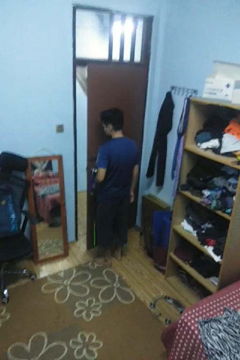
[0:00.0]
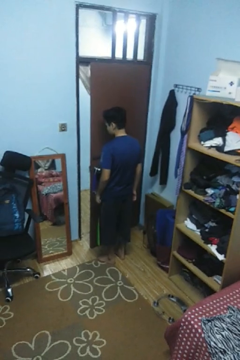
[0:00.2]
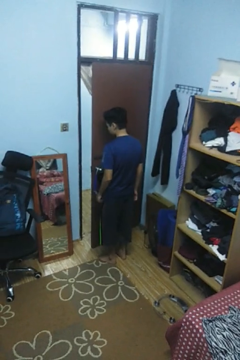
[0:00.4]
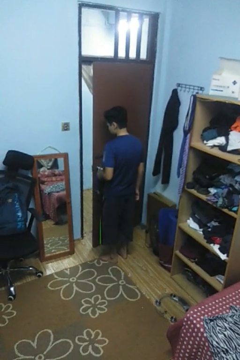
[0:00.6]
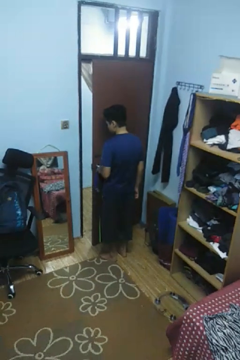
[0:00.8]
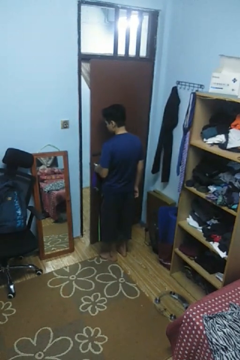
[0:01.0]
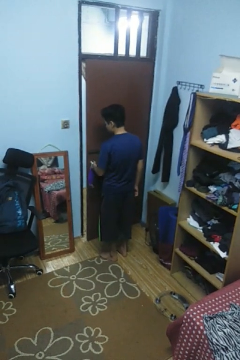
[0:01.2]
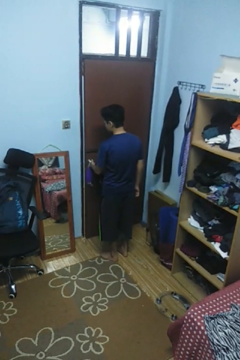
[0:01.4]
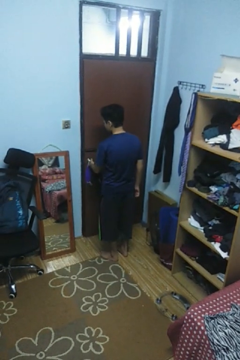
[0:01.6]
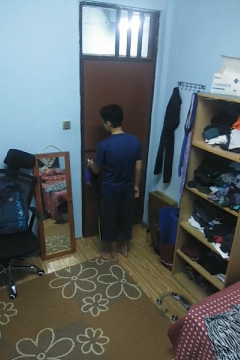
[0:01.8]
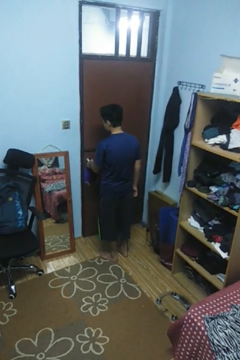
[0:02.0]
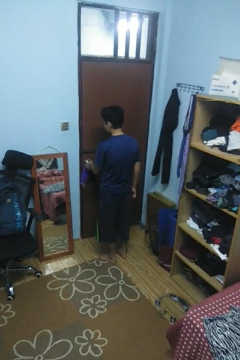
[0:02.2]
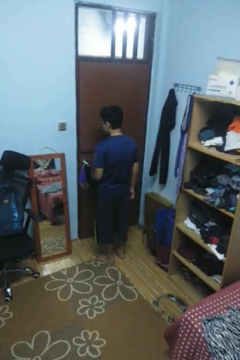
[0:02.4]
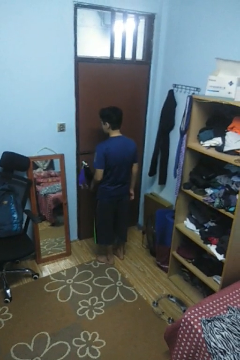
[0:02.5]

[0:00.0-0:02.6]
person closes facility door

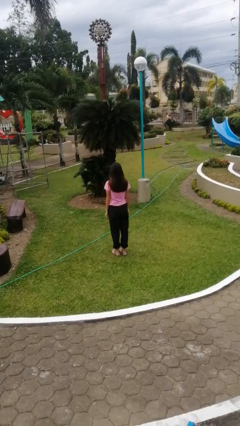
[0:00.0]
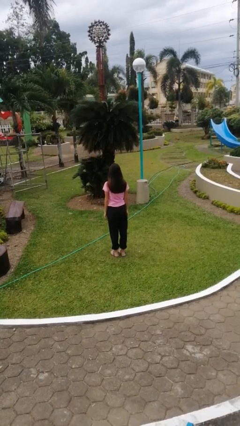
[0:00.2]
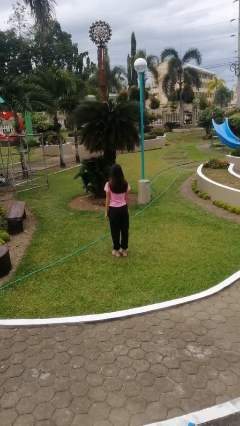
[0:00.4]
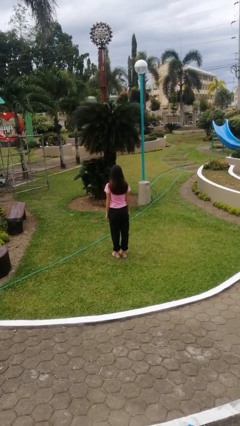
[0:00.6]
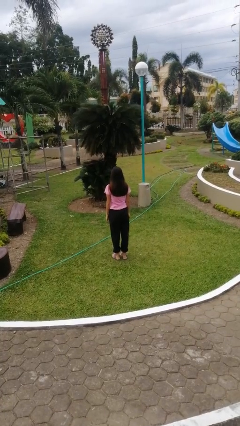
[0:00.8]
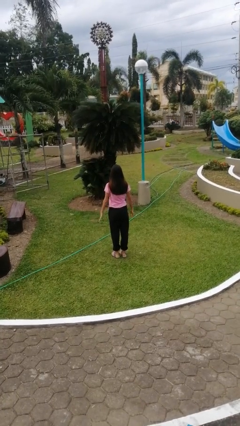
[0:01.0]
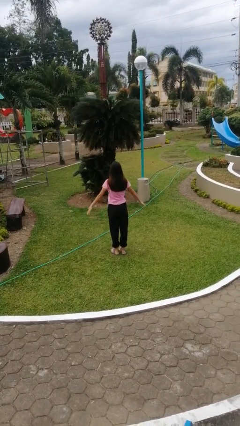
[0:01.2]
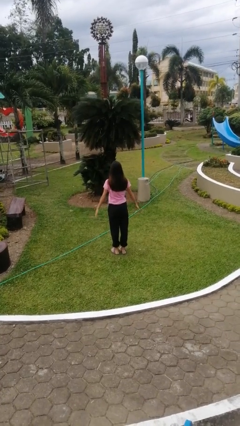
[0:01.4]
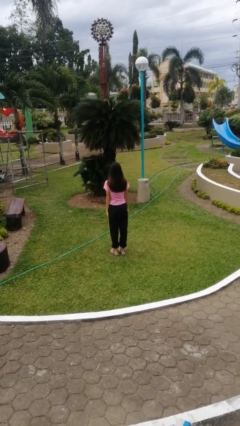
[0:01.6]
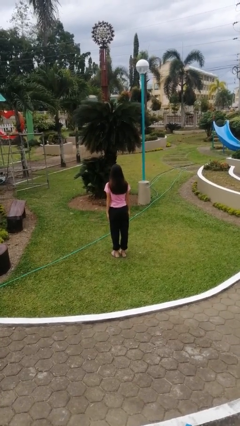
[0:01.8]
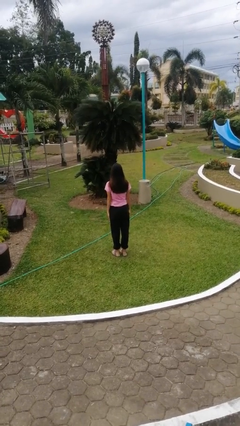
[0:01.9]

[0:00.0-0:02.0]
person slaps hands on thighs

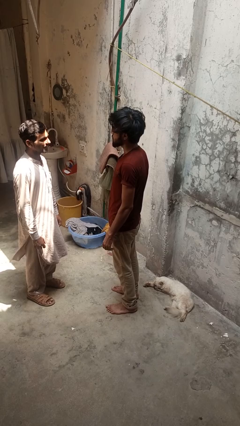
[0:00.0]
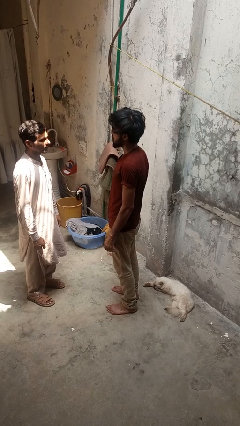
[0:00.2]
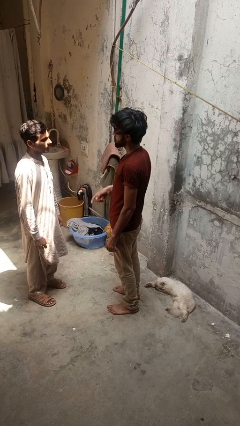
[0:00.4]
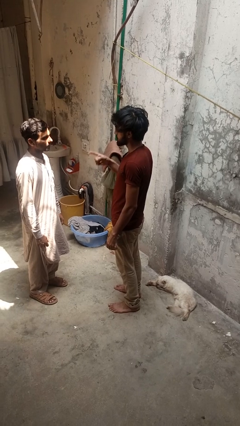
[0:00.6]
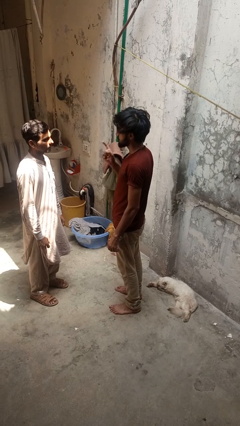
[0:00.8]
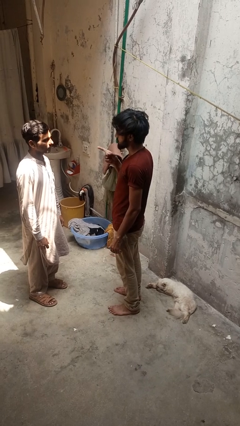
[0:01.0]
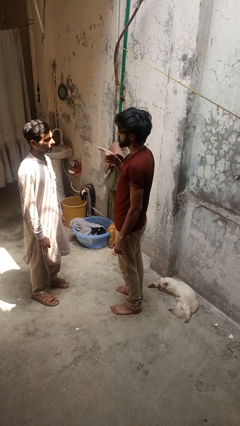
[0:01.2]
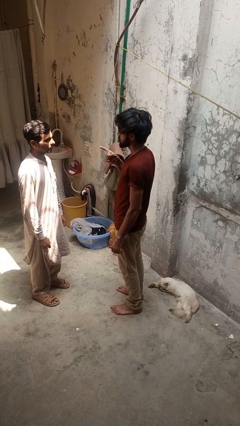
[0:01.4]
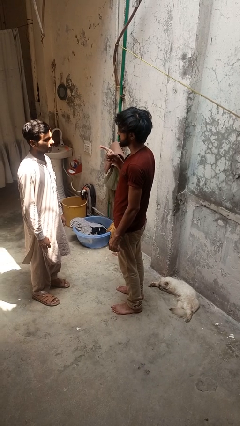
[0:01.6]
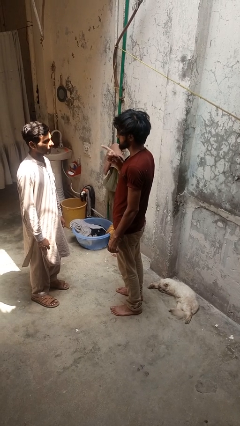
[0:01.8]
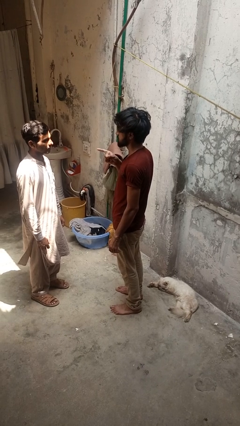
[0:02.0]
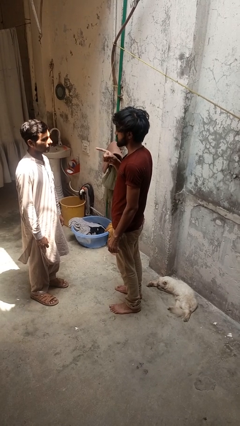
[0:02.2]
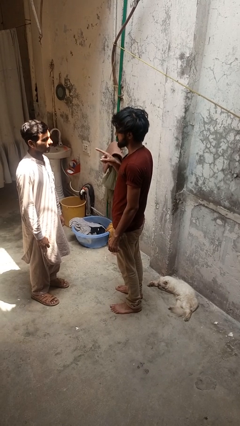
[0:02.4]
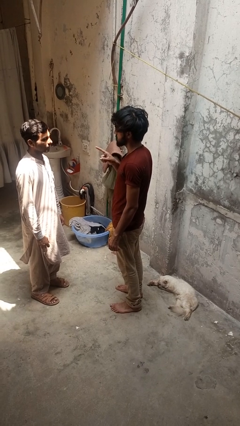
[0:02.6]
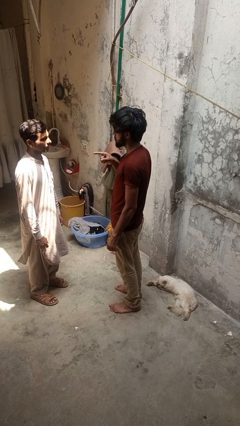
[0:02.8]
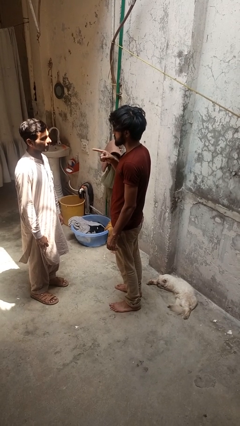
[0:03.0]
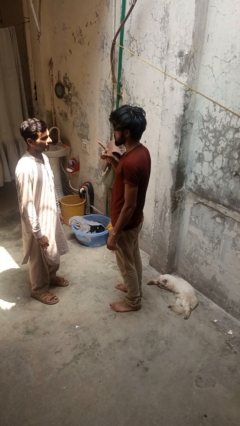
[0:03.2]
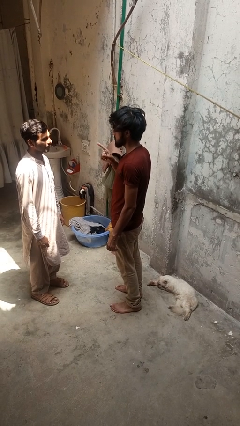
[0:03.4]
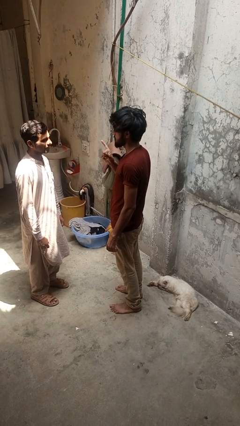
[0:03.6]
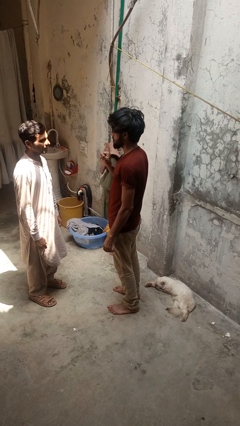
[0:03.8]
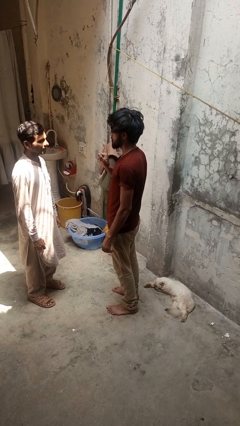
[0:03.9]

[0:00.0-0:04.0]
person points at person

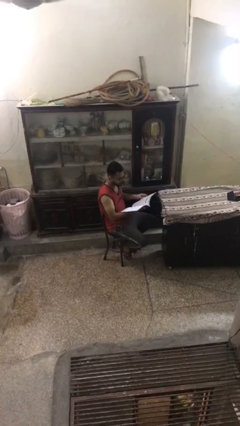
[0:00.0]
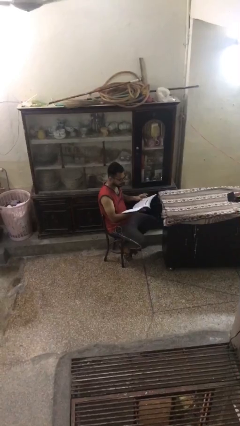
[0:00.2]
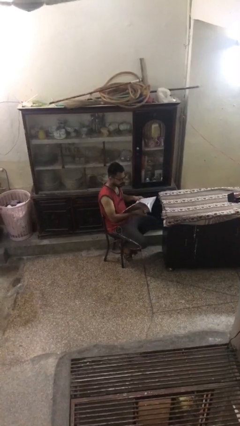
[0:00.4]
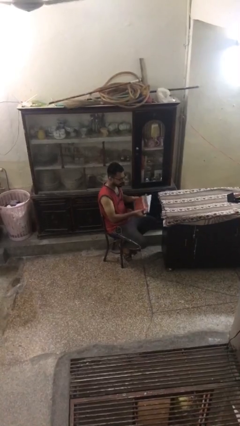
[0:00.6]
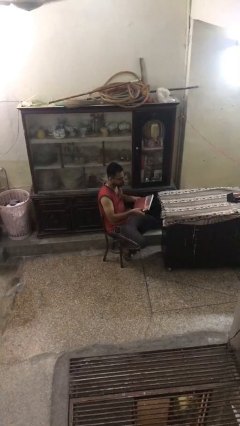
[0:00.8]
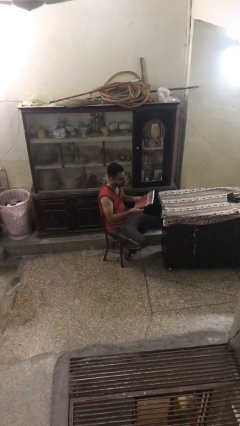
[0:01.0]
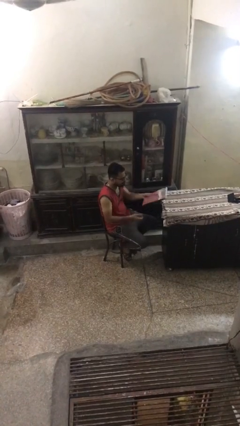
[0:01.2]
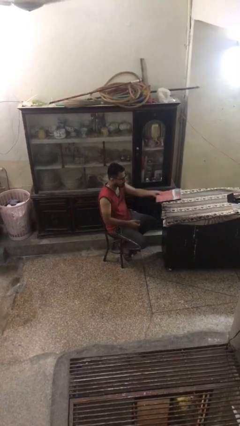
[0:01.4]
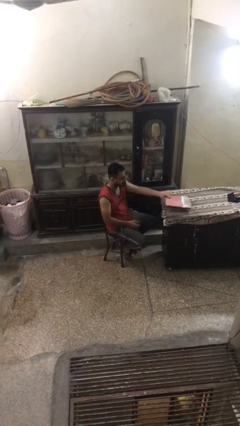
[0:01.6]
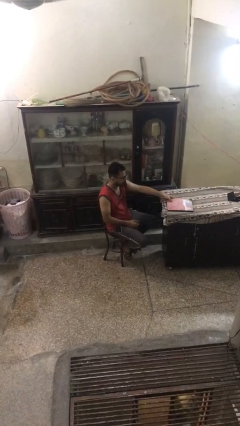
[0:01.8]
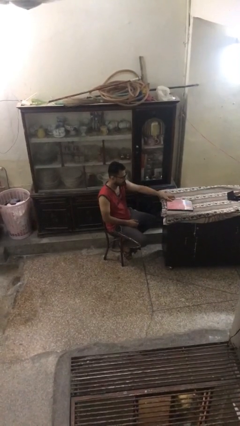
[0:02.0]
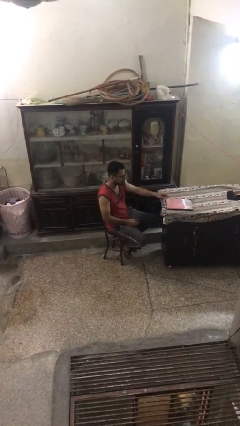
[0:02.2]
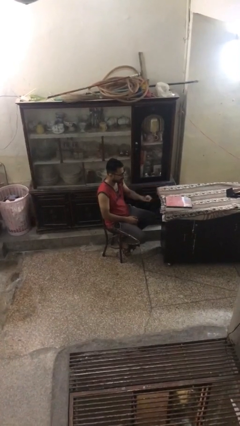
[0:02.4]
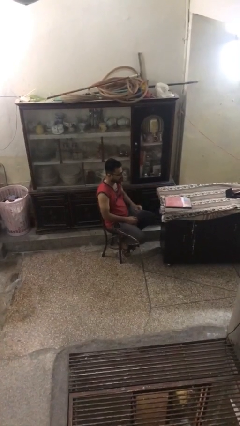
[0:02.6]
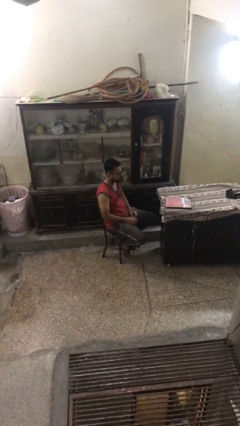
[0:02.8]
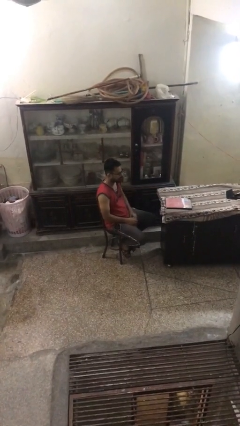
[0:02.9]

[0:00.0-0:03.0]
person puts down object on table

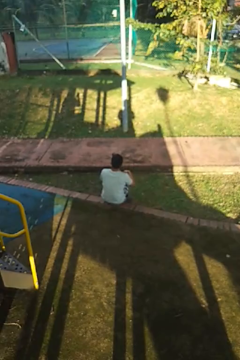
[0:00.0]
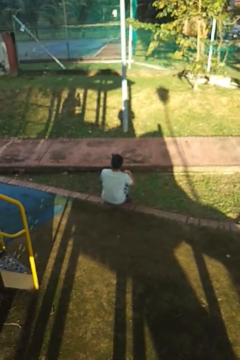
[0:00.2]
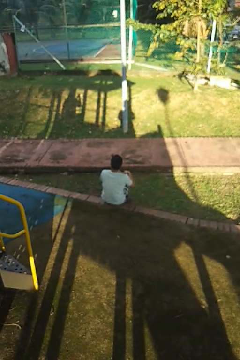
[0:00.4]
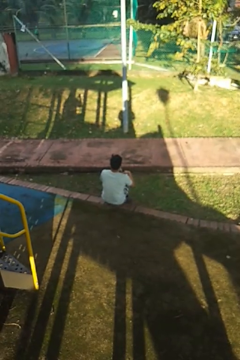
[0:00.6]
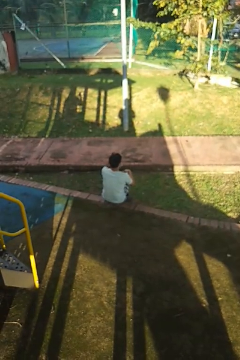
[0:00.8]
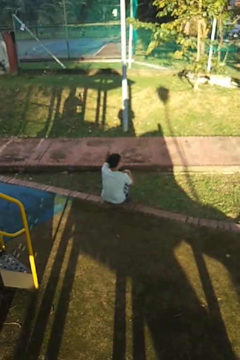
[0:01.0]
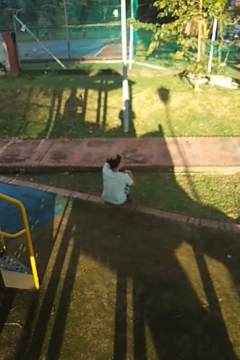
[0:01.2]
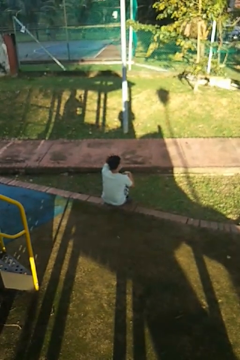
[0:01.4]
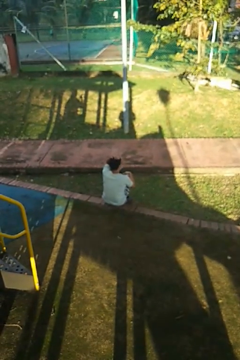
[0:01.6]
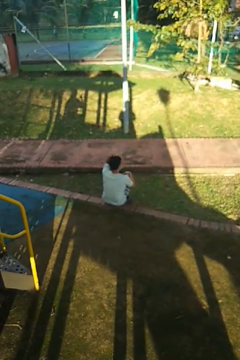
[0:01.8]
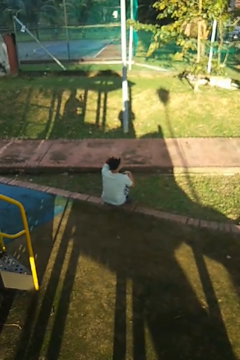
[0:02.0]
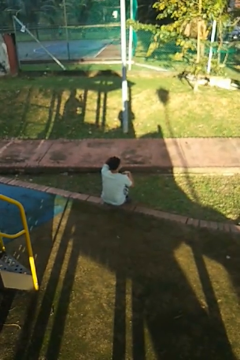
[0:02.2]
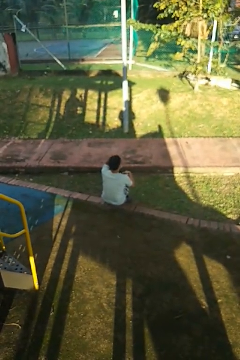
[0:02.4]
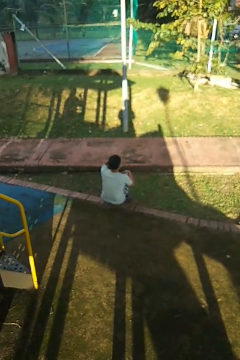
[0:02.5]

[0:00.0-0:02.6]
person pats head

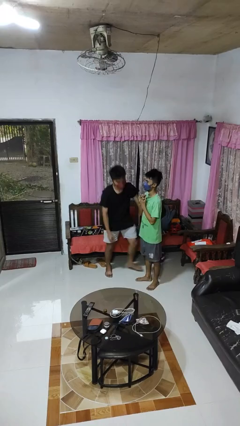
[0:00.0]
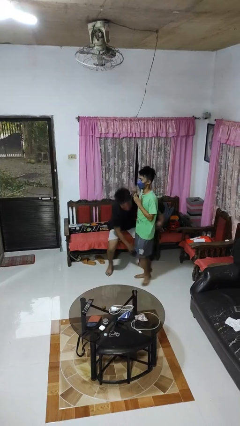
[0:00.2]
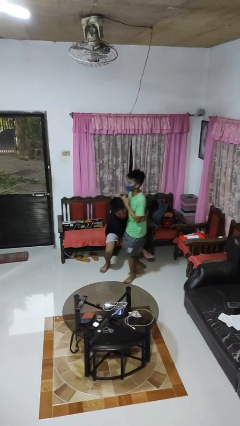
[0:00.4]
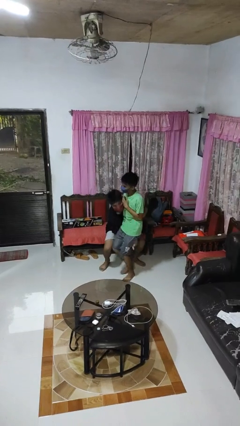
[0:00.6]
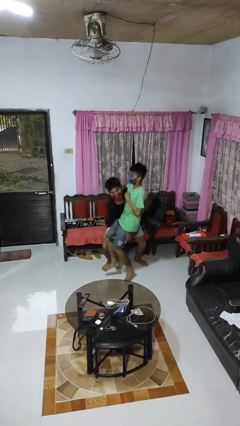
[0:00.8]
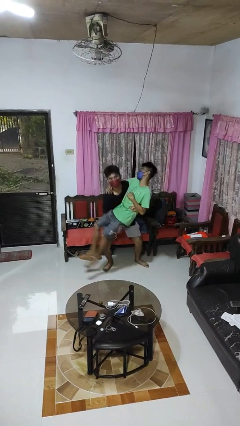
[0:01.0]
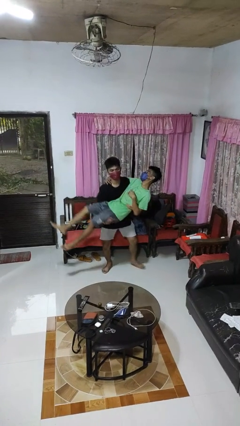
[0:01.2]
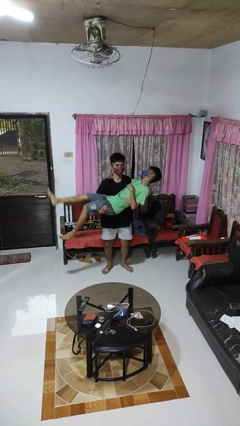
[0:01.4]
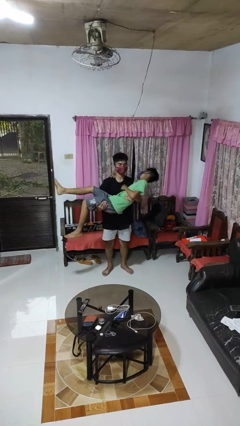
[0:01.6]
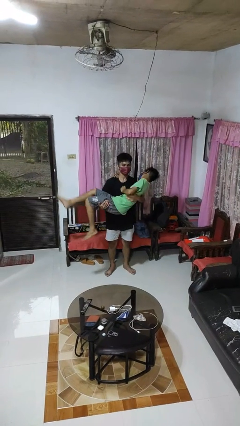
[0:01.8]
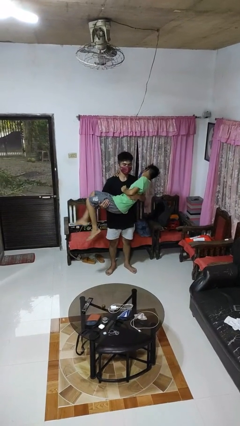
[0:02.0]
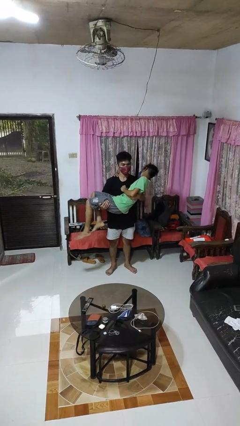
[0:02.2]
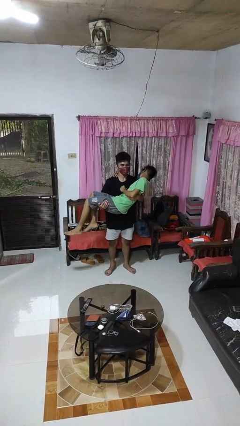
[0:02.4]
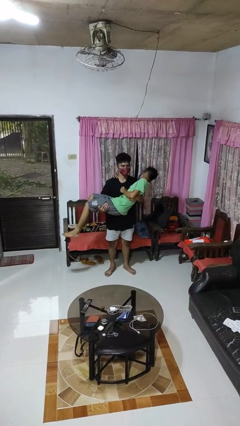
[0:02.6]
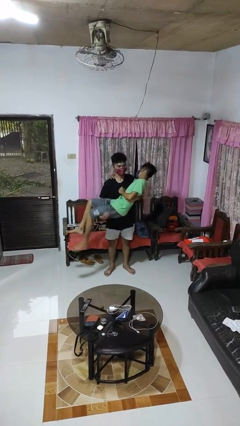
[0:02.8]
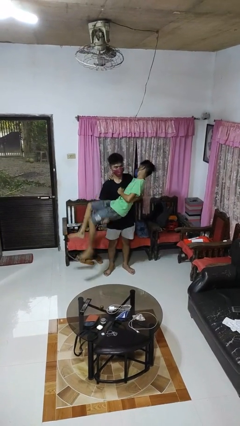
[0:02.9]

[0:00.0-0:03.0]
person picks up person

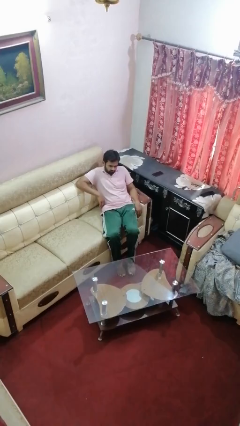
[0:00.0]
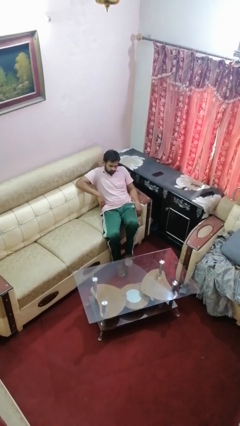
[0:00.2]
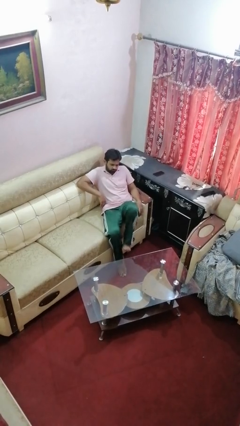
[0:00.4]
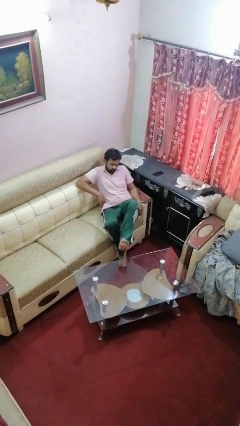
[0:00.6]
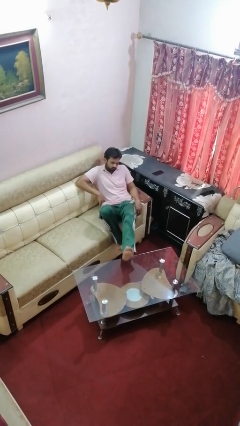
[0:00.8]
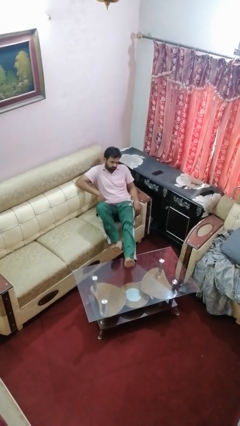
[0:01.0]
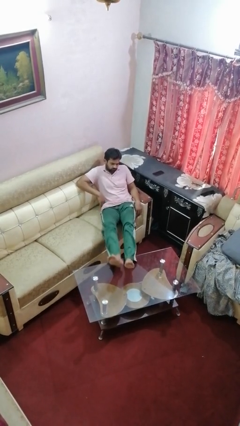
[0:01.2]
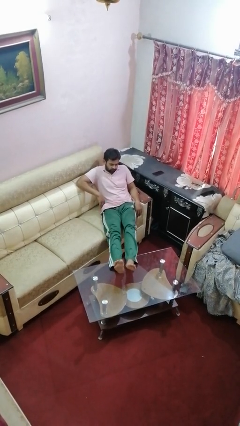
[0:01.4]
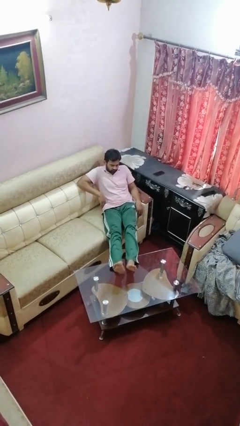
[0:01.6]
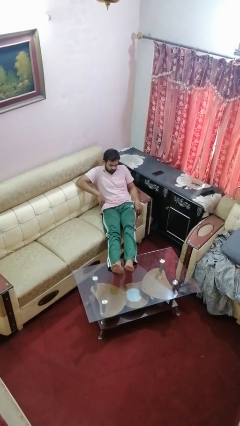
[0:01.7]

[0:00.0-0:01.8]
person puts feet up
